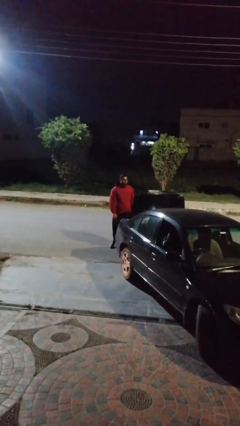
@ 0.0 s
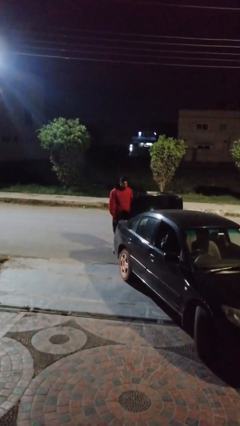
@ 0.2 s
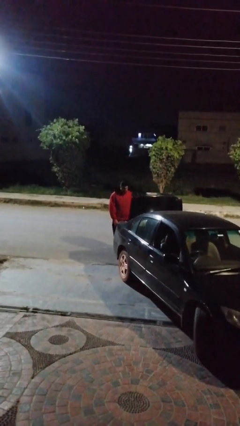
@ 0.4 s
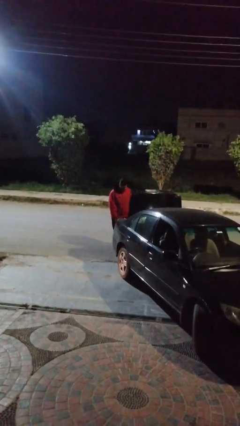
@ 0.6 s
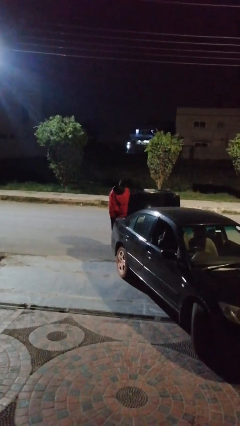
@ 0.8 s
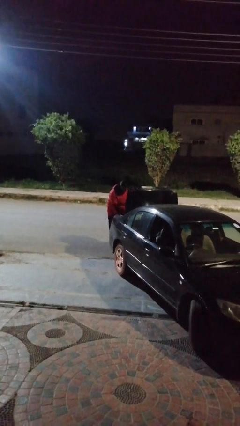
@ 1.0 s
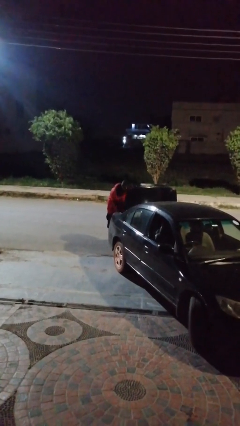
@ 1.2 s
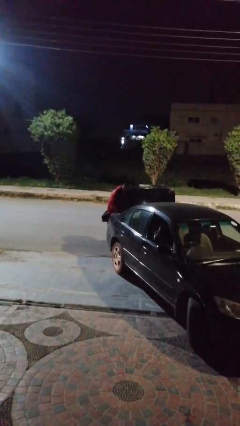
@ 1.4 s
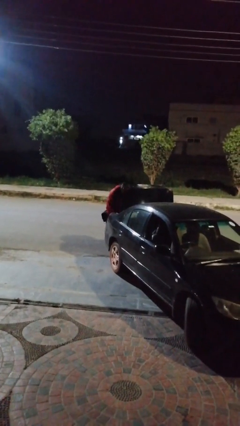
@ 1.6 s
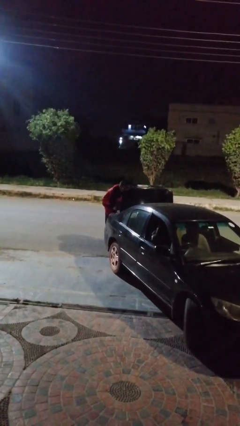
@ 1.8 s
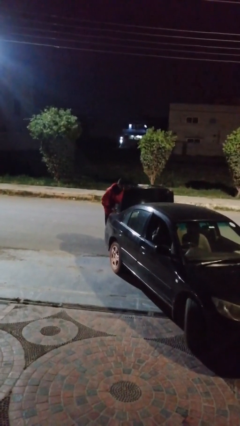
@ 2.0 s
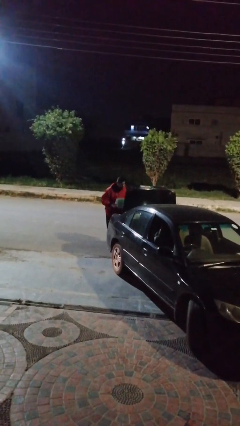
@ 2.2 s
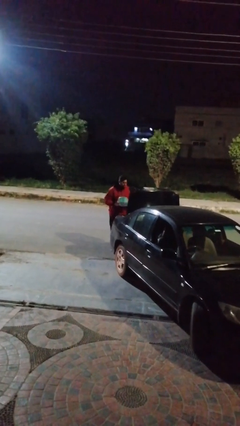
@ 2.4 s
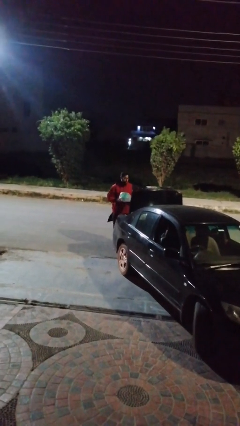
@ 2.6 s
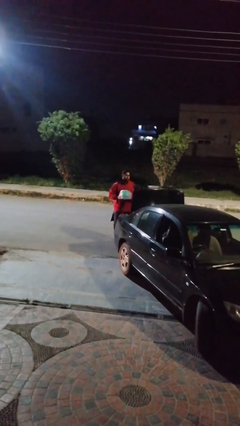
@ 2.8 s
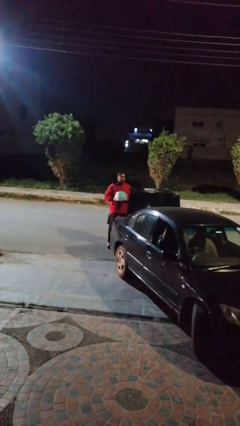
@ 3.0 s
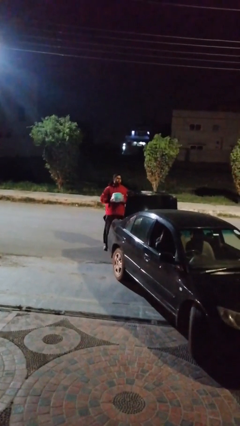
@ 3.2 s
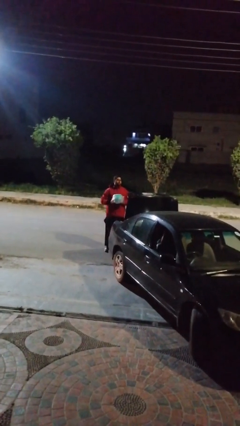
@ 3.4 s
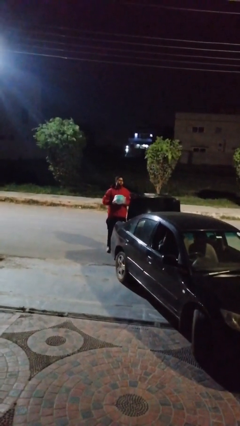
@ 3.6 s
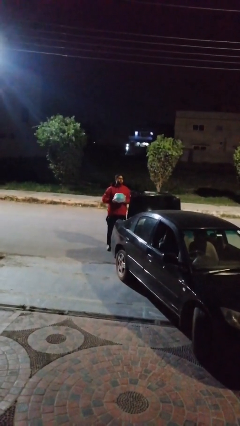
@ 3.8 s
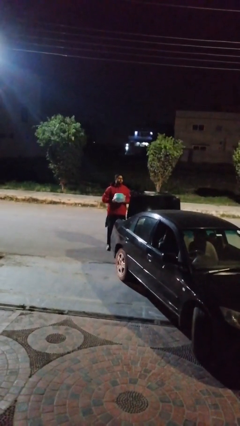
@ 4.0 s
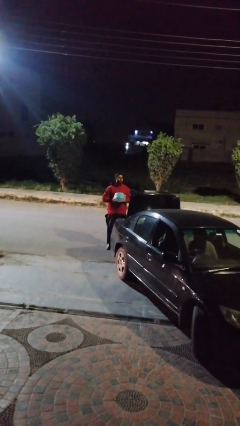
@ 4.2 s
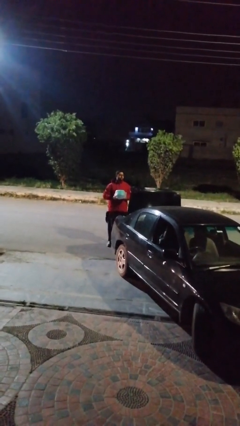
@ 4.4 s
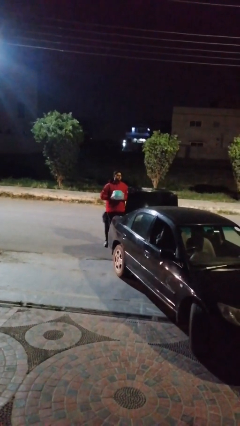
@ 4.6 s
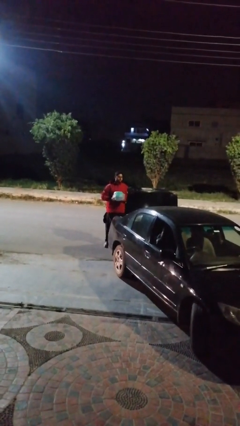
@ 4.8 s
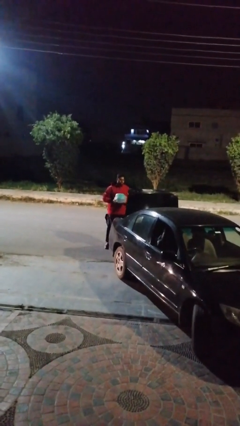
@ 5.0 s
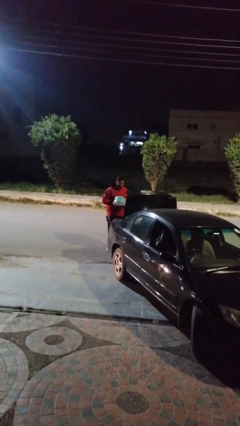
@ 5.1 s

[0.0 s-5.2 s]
person unloads car

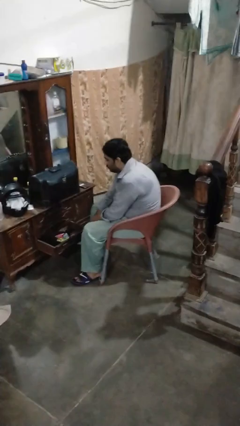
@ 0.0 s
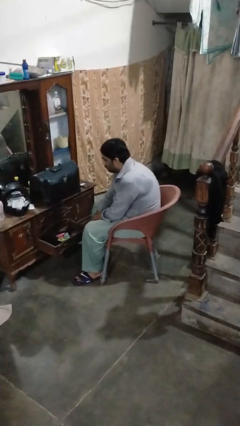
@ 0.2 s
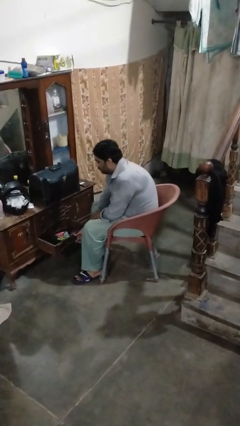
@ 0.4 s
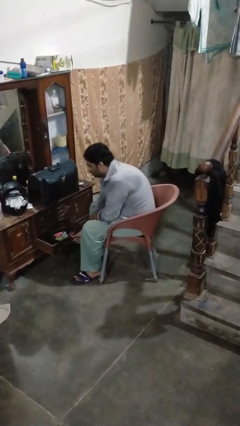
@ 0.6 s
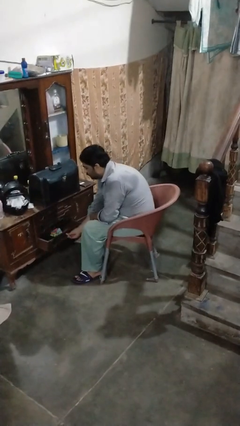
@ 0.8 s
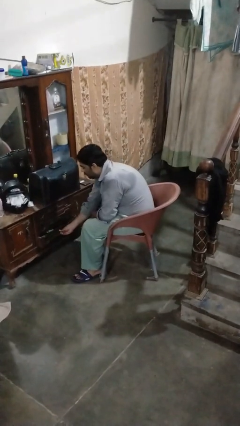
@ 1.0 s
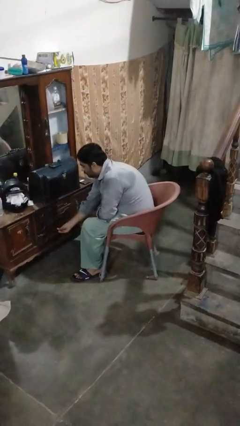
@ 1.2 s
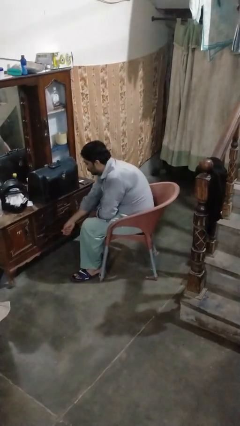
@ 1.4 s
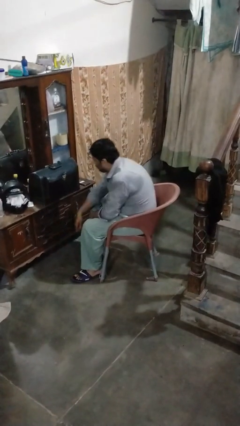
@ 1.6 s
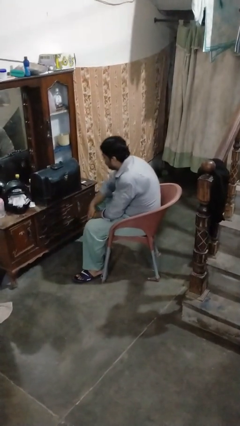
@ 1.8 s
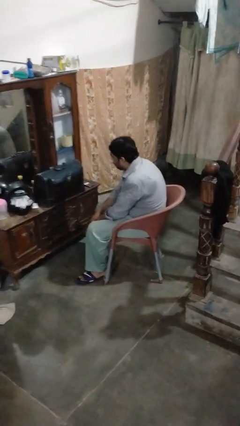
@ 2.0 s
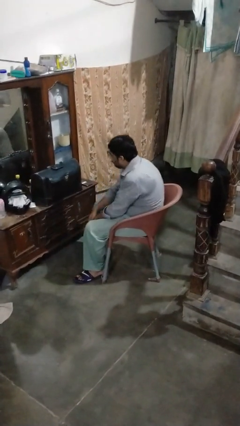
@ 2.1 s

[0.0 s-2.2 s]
person closes dresser drawer

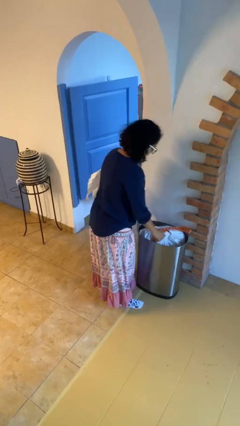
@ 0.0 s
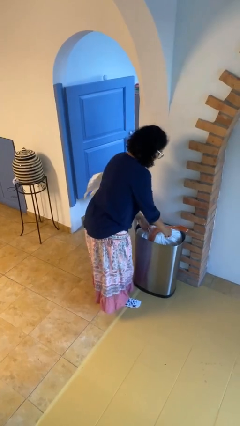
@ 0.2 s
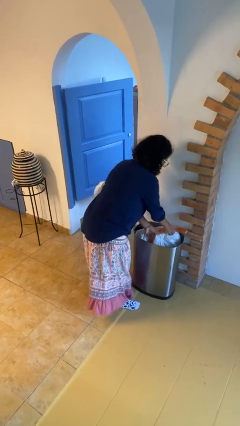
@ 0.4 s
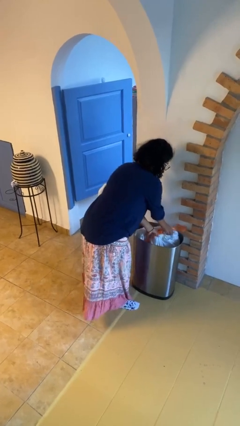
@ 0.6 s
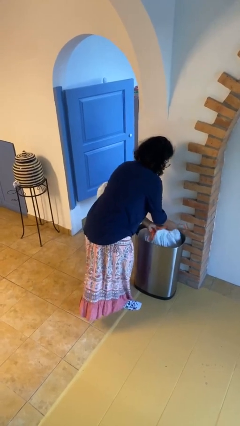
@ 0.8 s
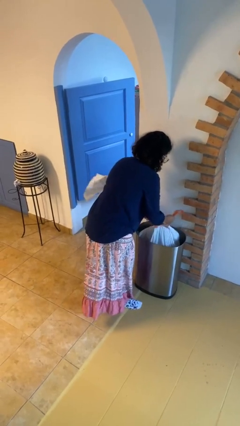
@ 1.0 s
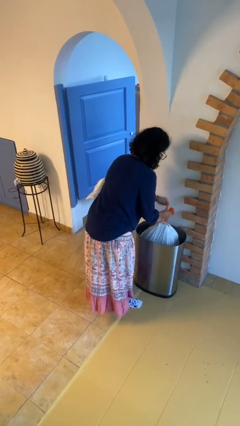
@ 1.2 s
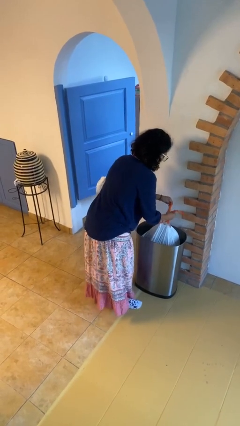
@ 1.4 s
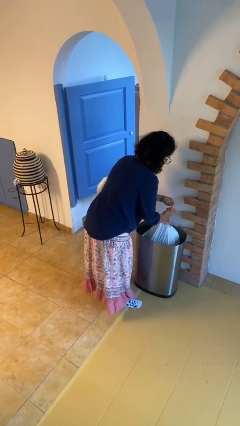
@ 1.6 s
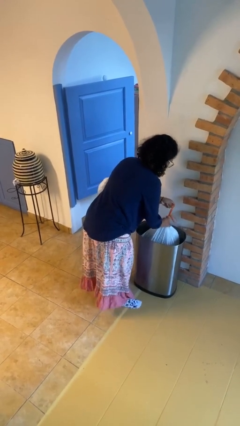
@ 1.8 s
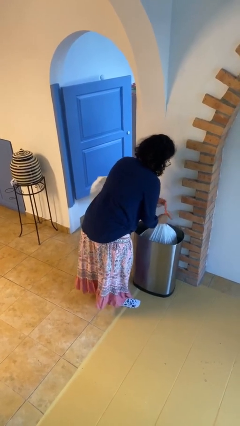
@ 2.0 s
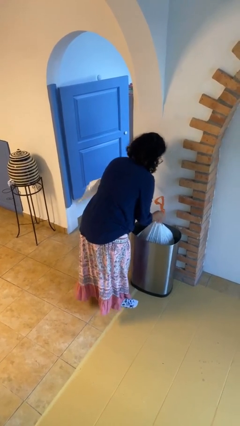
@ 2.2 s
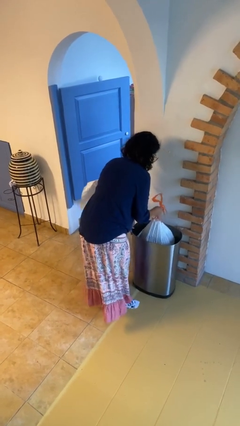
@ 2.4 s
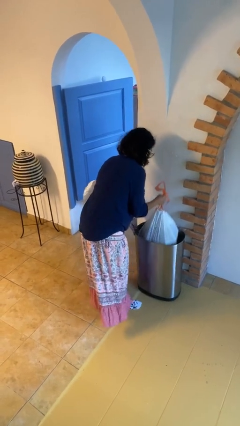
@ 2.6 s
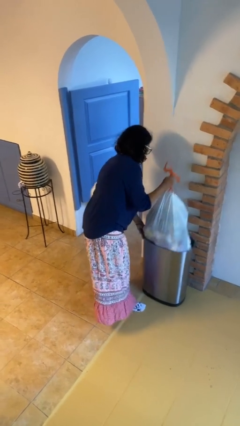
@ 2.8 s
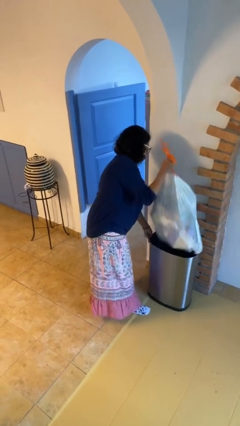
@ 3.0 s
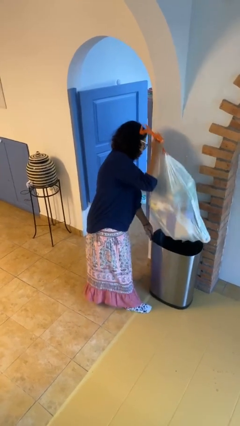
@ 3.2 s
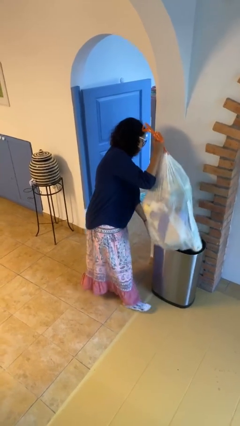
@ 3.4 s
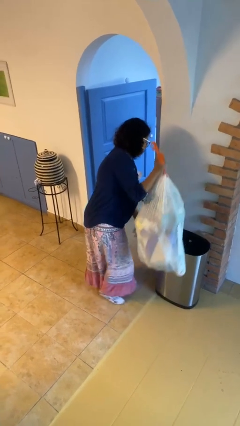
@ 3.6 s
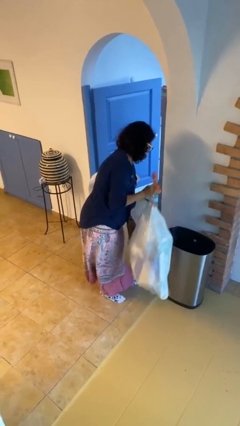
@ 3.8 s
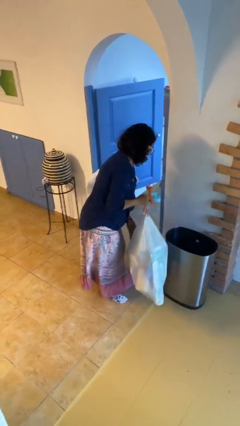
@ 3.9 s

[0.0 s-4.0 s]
person removes trashbag from trashcan

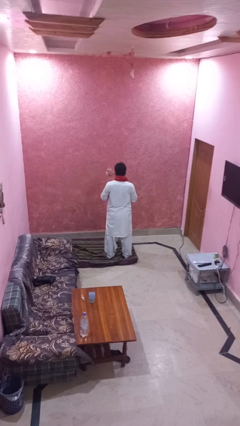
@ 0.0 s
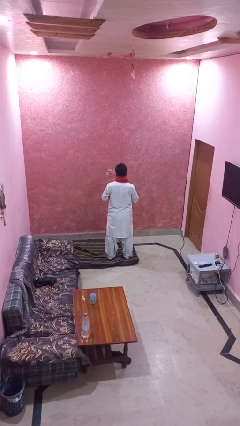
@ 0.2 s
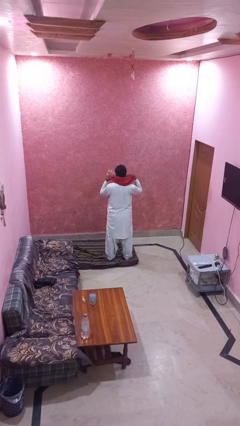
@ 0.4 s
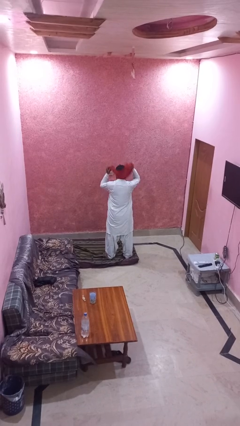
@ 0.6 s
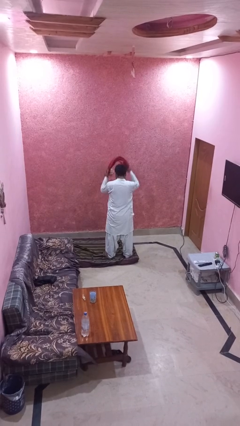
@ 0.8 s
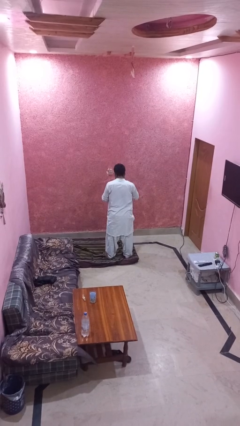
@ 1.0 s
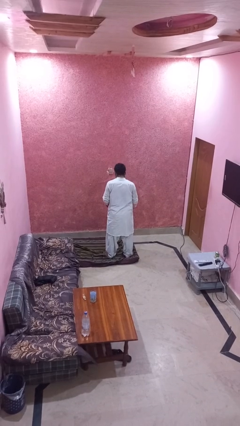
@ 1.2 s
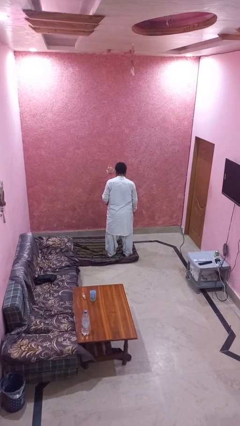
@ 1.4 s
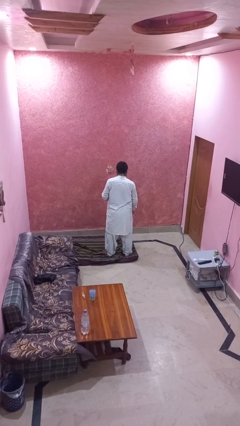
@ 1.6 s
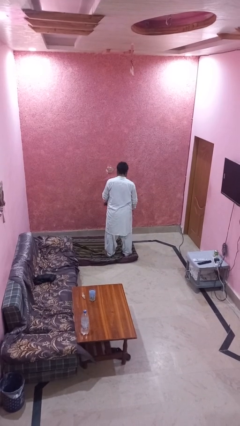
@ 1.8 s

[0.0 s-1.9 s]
person takes off scarf

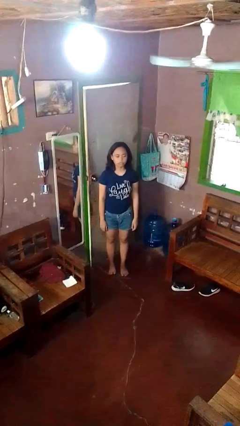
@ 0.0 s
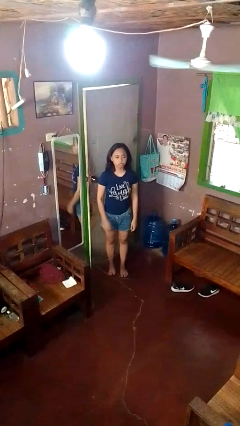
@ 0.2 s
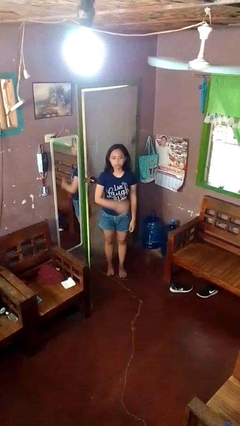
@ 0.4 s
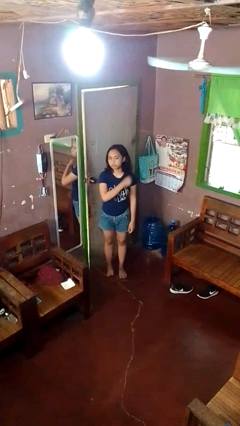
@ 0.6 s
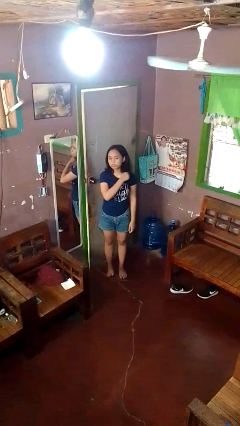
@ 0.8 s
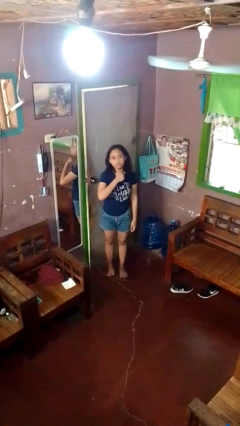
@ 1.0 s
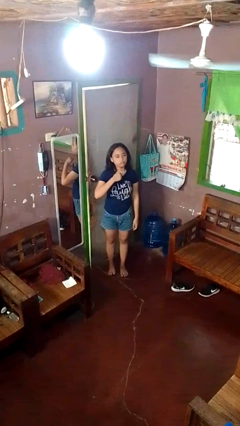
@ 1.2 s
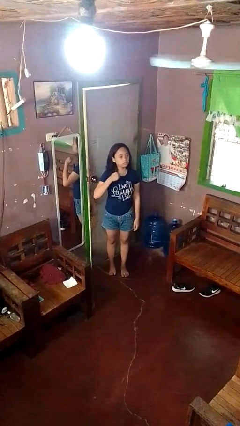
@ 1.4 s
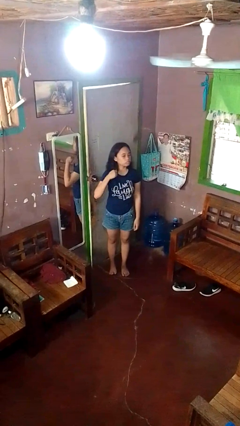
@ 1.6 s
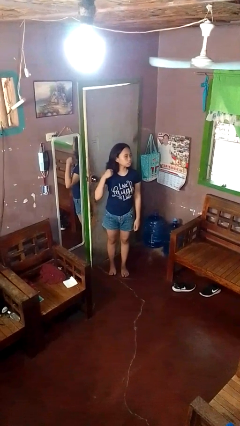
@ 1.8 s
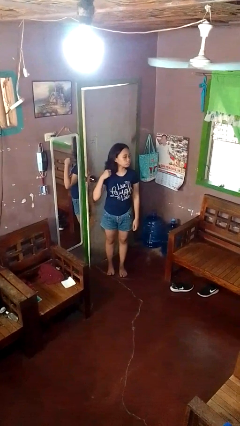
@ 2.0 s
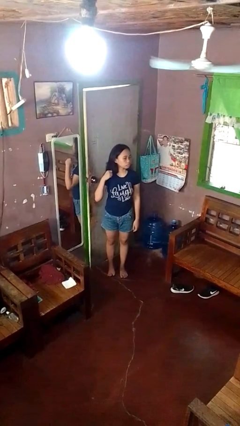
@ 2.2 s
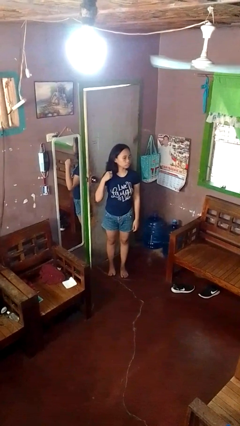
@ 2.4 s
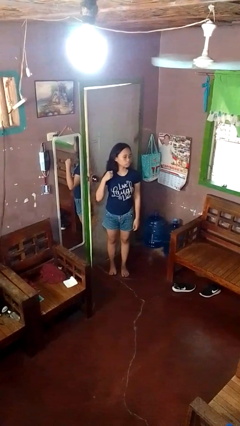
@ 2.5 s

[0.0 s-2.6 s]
person gestures cut

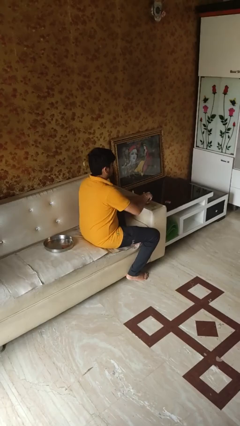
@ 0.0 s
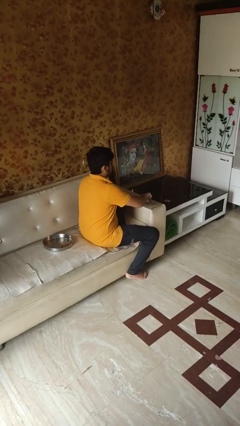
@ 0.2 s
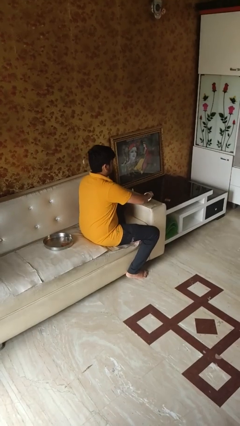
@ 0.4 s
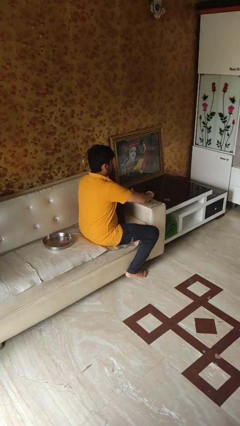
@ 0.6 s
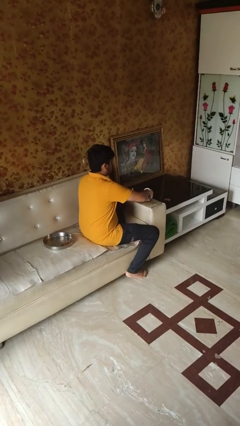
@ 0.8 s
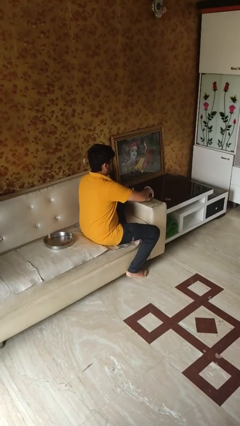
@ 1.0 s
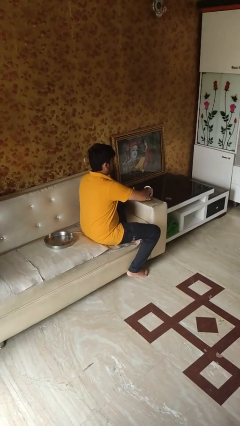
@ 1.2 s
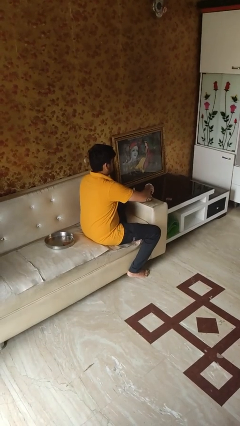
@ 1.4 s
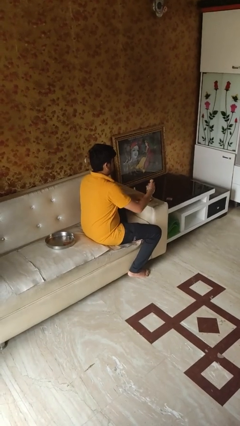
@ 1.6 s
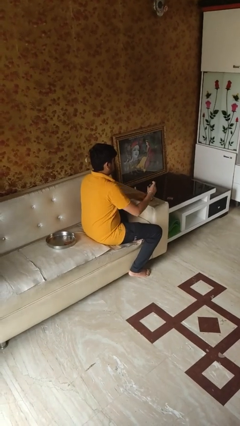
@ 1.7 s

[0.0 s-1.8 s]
person opens jar
